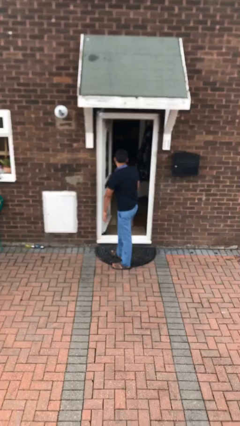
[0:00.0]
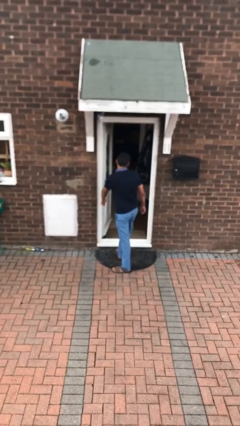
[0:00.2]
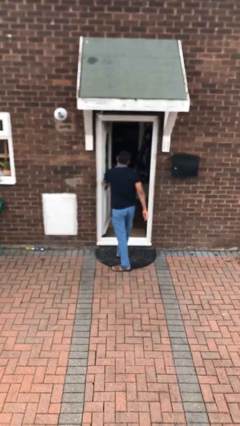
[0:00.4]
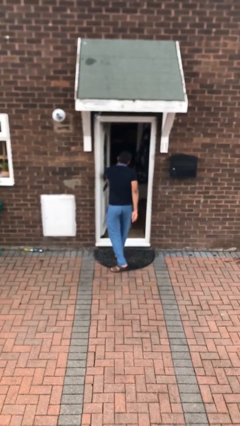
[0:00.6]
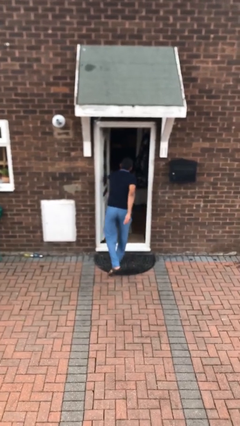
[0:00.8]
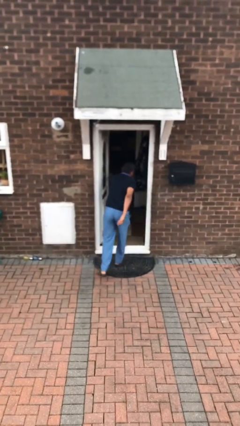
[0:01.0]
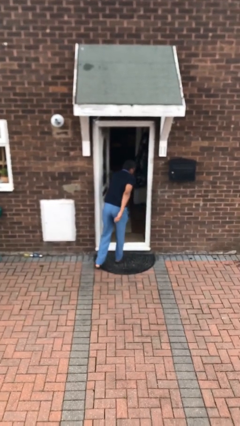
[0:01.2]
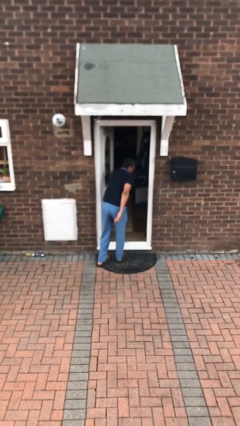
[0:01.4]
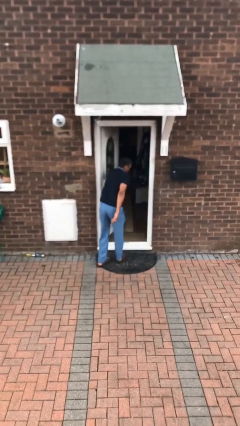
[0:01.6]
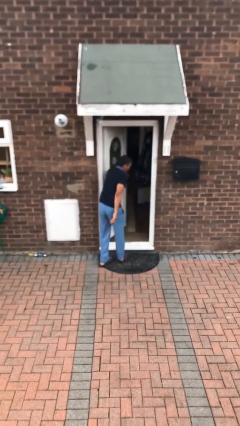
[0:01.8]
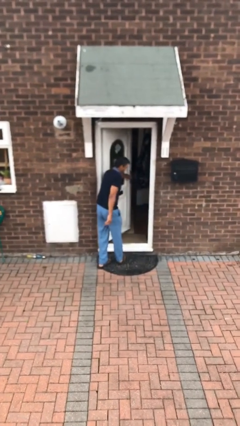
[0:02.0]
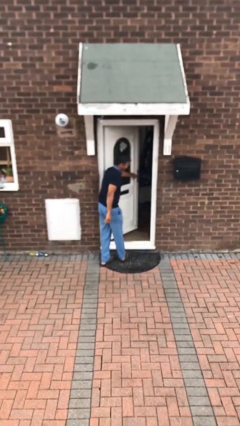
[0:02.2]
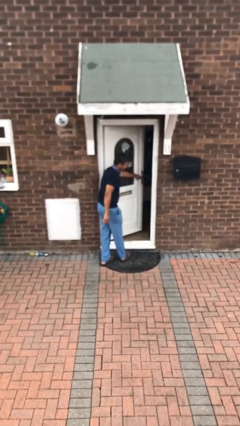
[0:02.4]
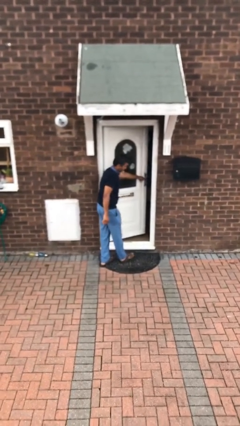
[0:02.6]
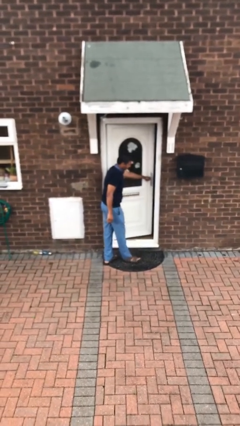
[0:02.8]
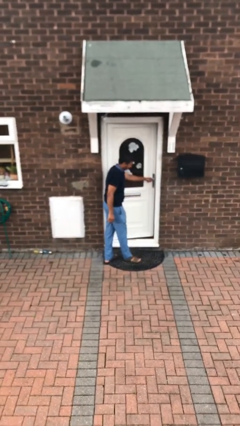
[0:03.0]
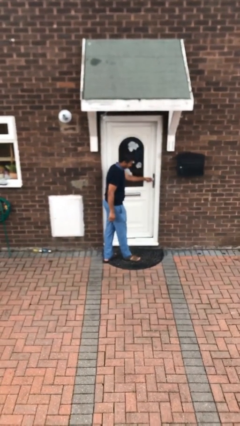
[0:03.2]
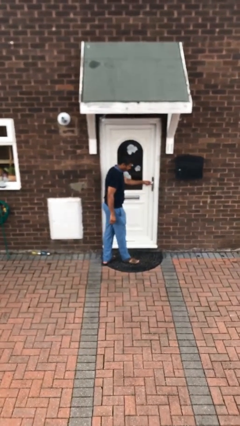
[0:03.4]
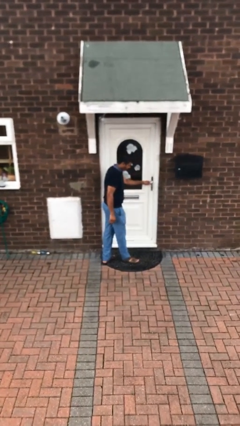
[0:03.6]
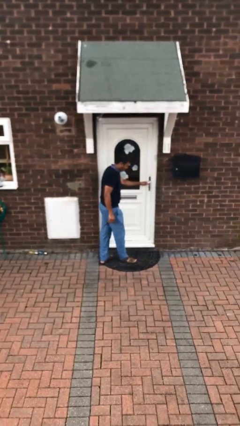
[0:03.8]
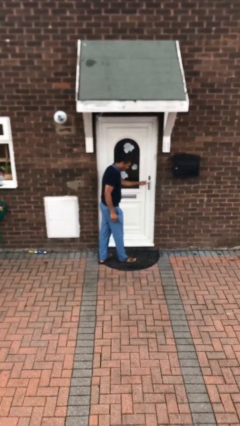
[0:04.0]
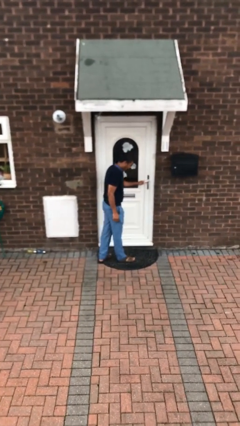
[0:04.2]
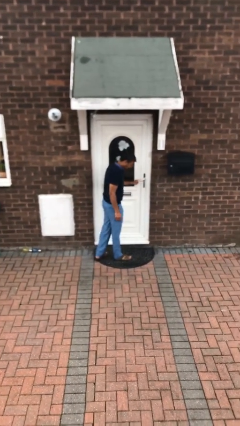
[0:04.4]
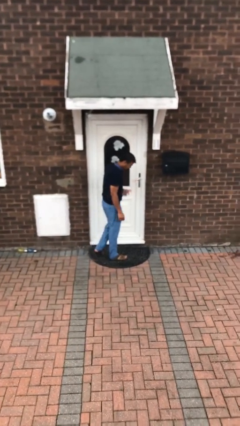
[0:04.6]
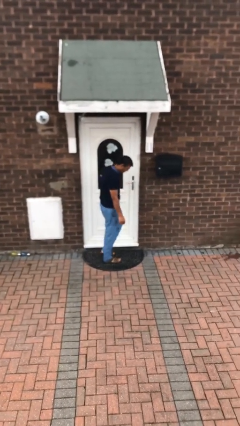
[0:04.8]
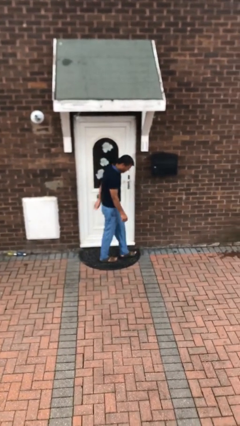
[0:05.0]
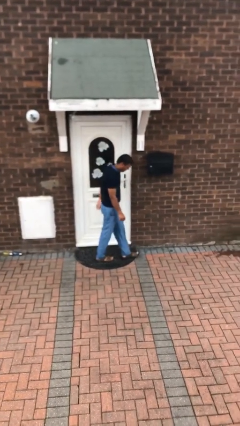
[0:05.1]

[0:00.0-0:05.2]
person closes facility door

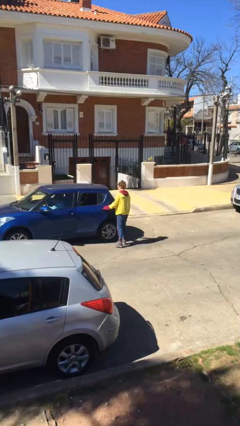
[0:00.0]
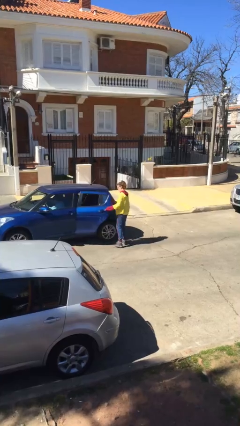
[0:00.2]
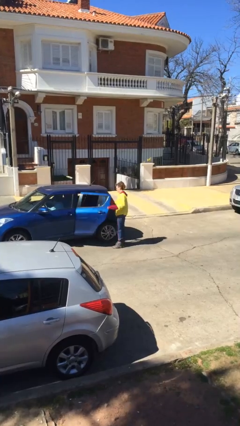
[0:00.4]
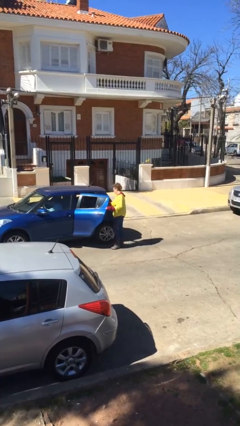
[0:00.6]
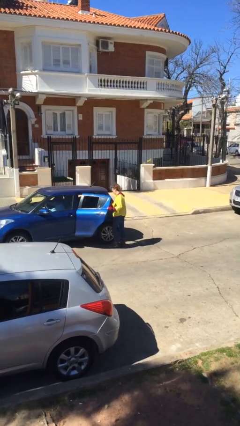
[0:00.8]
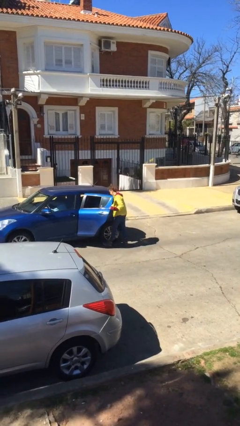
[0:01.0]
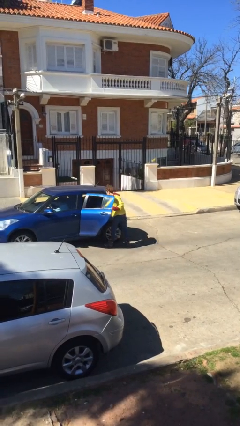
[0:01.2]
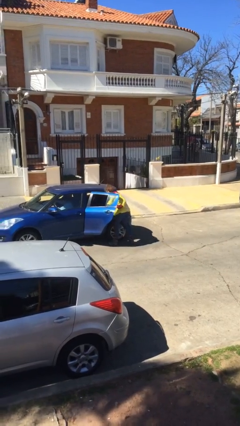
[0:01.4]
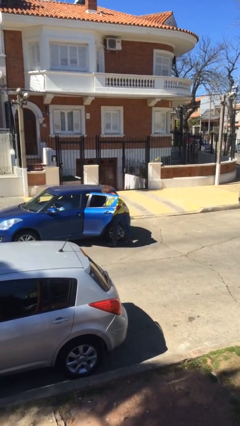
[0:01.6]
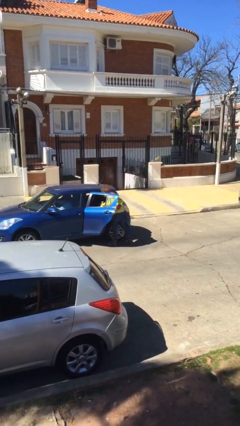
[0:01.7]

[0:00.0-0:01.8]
person opens car door

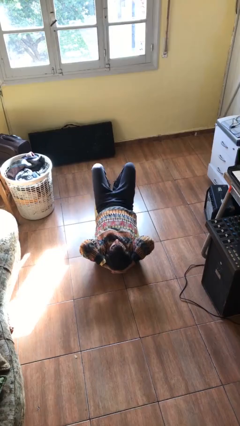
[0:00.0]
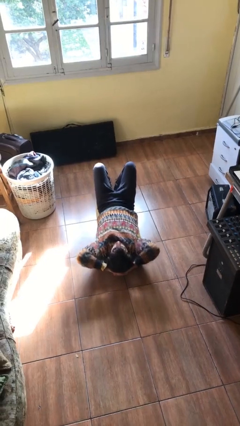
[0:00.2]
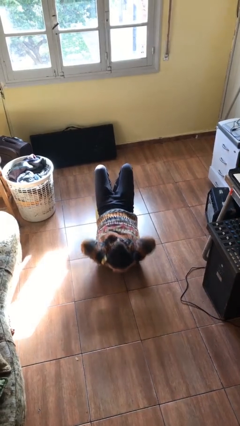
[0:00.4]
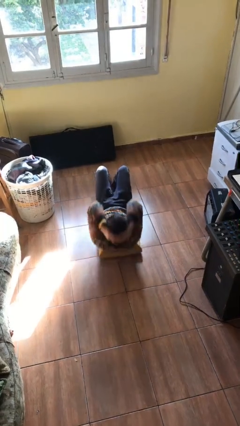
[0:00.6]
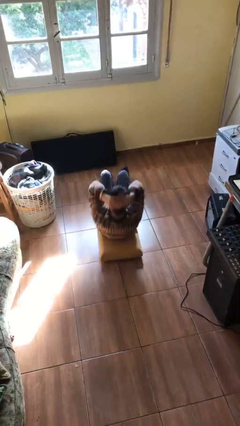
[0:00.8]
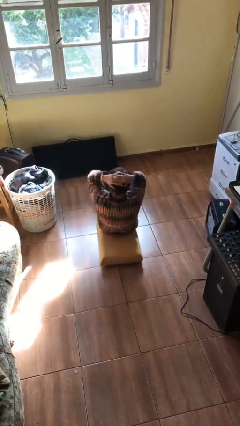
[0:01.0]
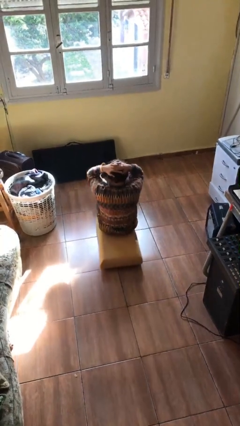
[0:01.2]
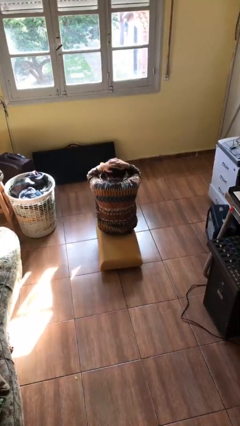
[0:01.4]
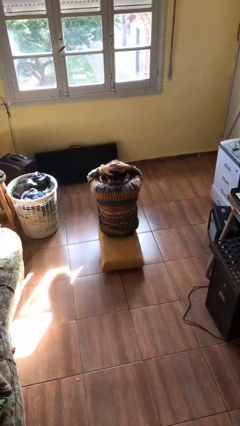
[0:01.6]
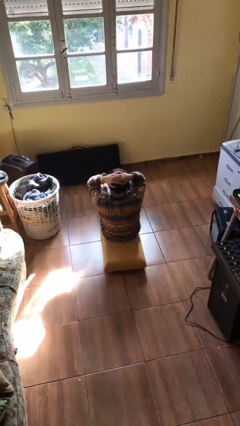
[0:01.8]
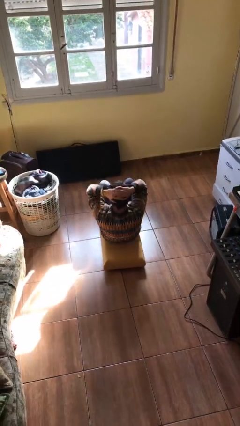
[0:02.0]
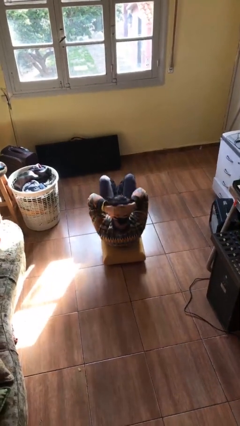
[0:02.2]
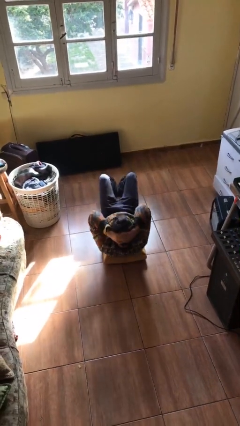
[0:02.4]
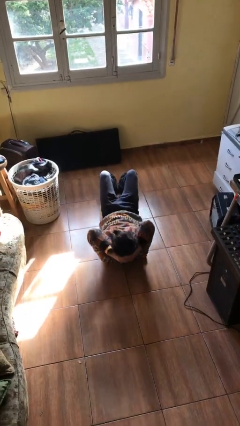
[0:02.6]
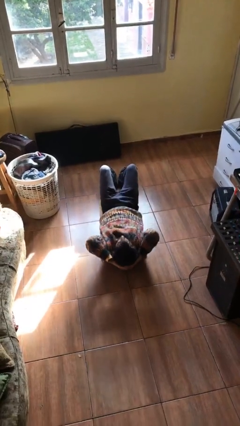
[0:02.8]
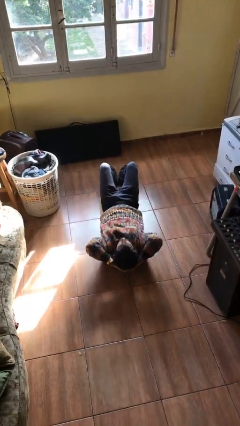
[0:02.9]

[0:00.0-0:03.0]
person exercises with situp

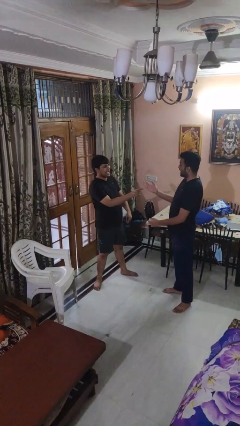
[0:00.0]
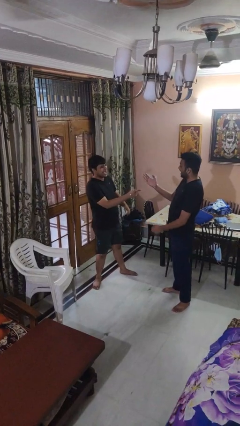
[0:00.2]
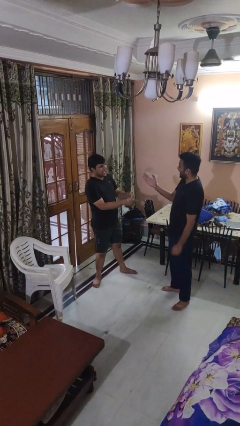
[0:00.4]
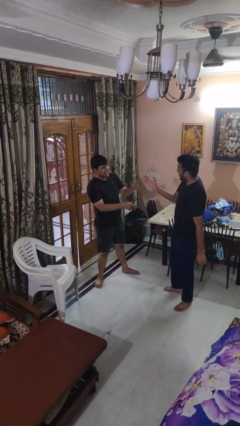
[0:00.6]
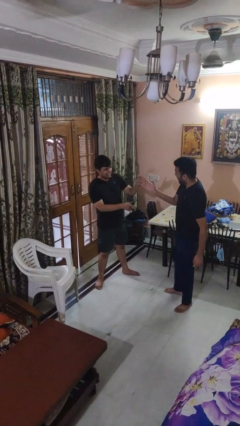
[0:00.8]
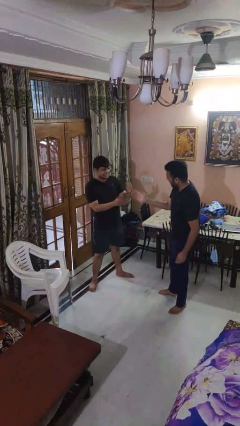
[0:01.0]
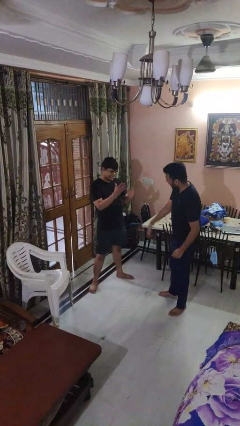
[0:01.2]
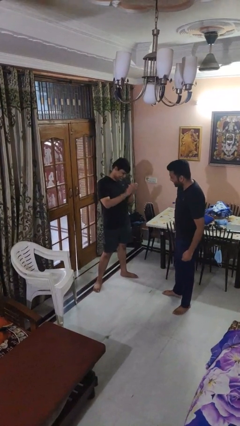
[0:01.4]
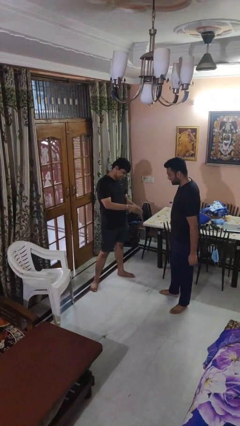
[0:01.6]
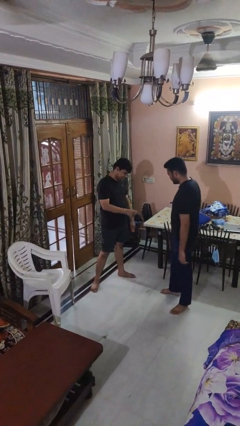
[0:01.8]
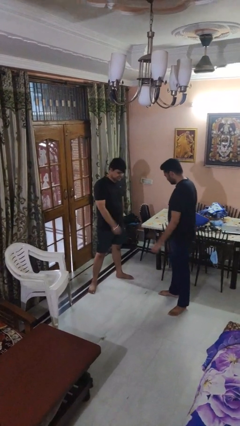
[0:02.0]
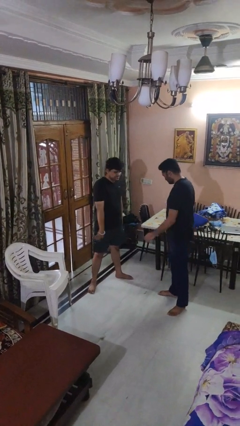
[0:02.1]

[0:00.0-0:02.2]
person laughs with person

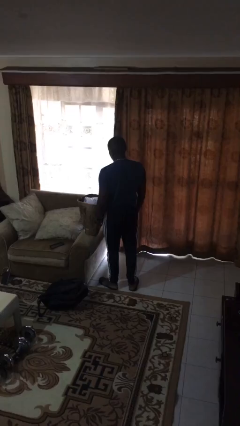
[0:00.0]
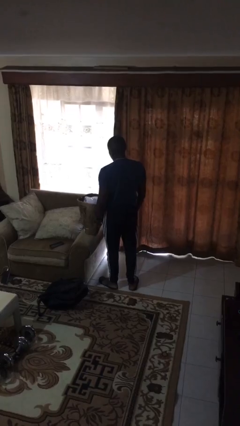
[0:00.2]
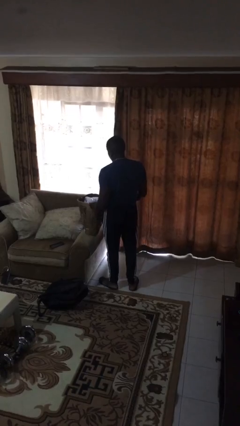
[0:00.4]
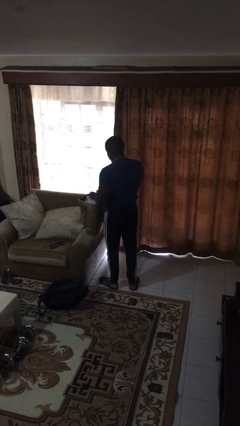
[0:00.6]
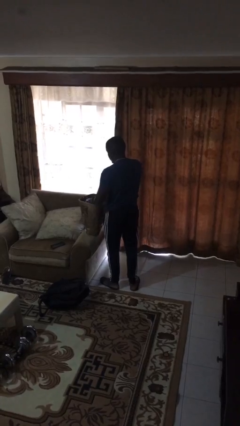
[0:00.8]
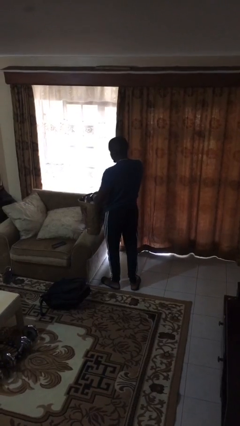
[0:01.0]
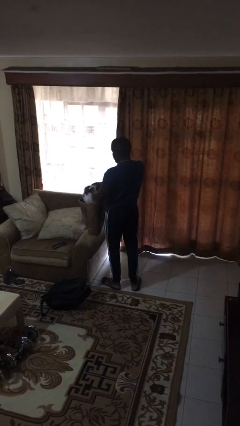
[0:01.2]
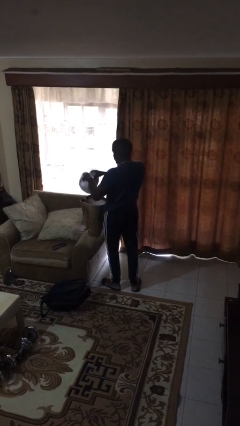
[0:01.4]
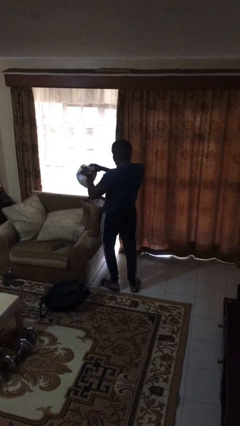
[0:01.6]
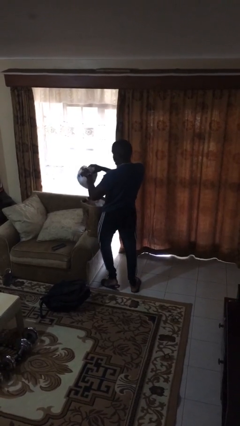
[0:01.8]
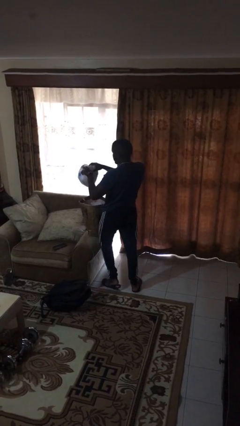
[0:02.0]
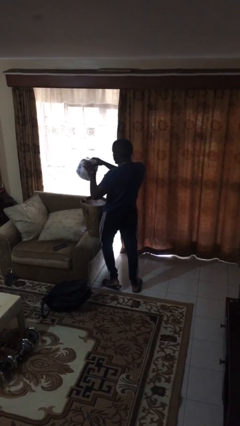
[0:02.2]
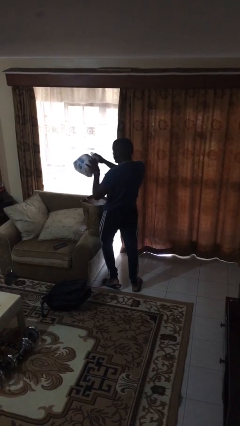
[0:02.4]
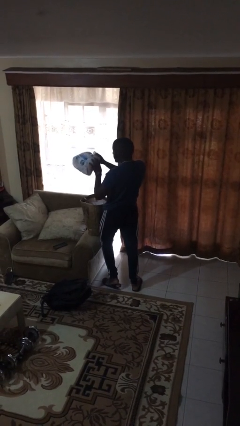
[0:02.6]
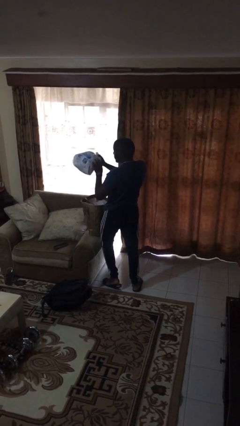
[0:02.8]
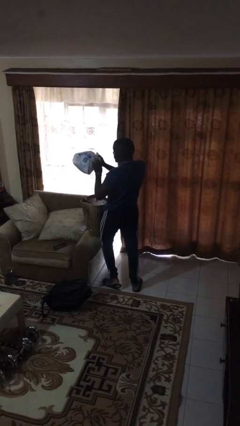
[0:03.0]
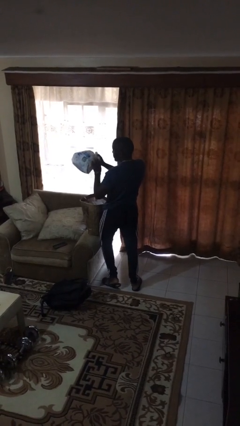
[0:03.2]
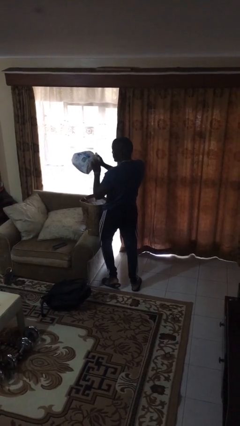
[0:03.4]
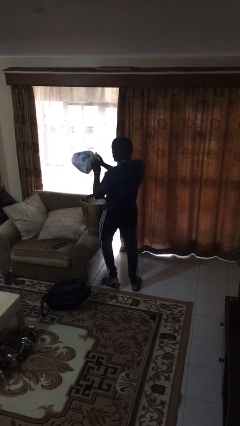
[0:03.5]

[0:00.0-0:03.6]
person takes object from bag

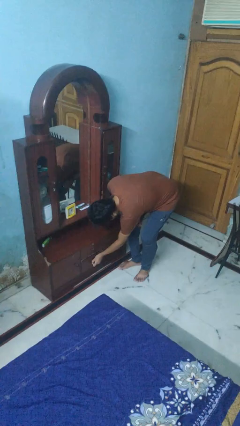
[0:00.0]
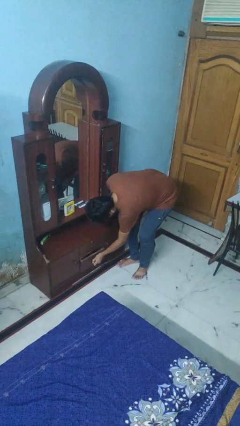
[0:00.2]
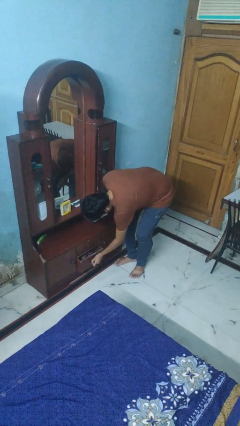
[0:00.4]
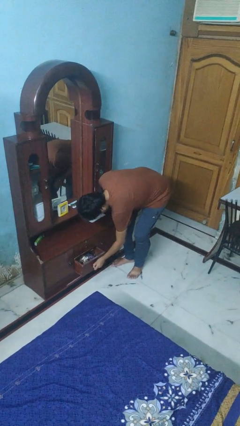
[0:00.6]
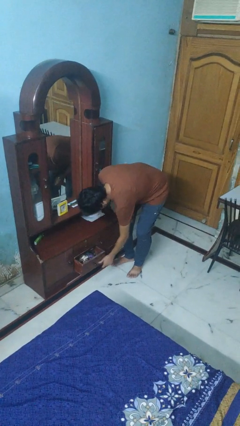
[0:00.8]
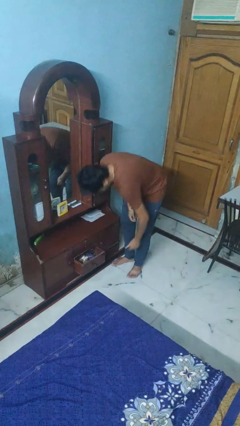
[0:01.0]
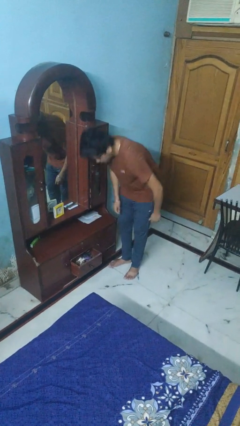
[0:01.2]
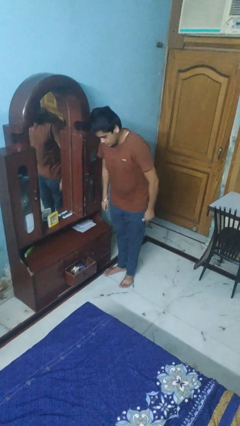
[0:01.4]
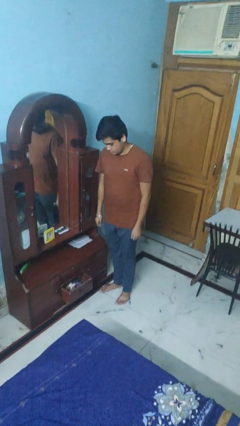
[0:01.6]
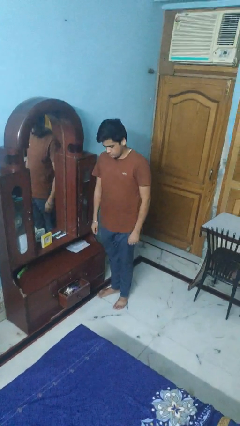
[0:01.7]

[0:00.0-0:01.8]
person opens dresser drawer

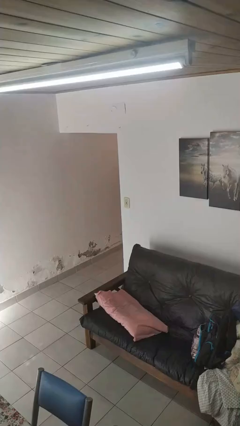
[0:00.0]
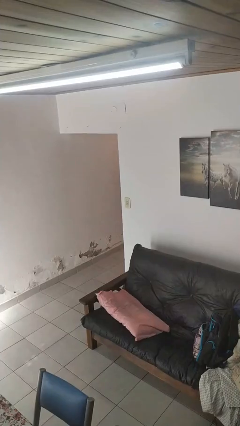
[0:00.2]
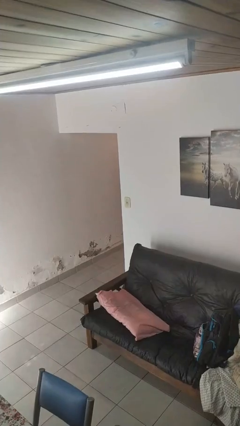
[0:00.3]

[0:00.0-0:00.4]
person exits scene through structure
